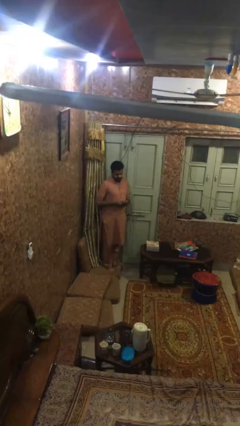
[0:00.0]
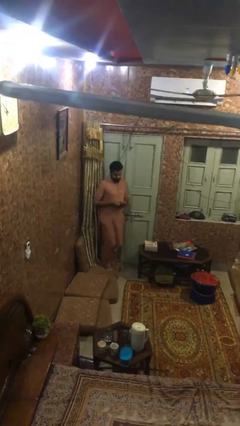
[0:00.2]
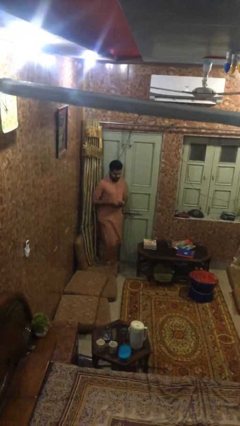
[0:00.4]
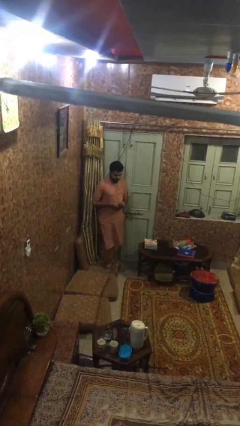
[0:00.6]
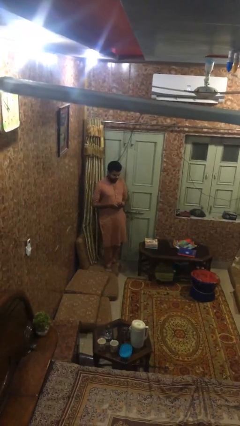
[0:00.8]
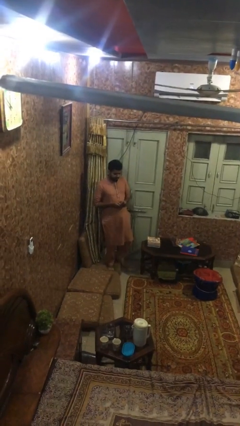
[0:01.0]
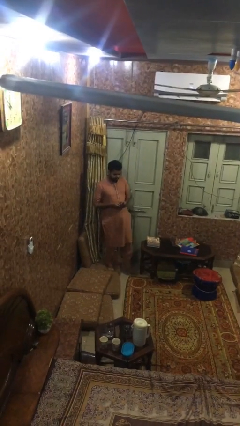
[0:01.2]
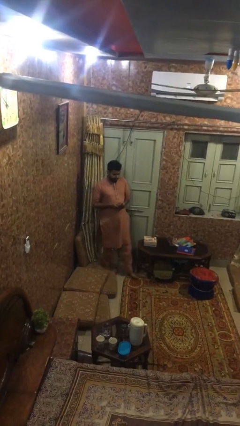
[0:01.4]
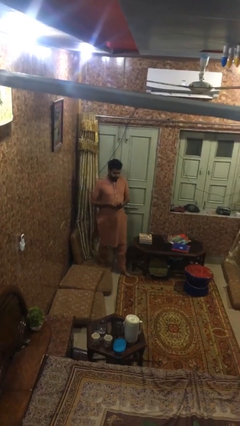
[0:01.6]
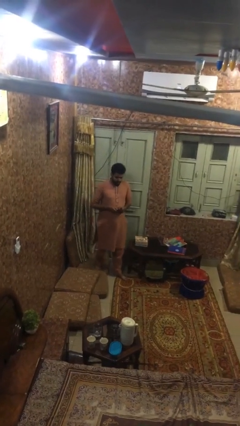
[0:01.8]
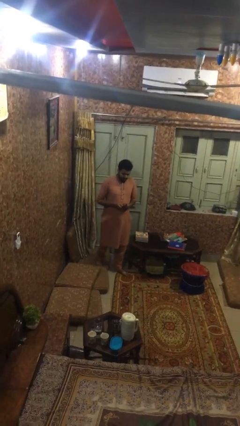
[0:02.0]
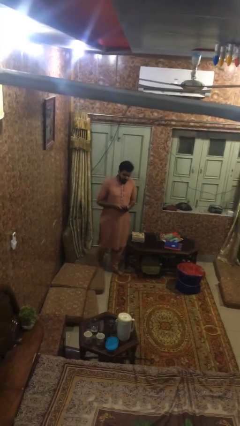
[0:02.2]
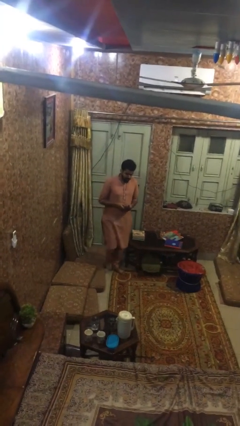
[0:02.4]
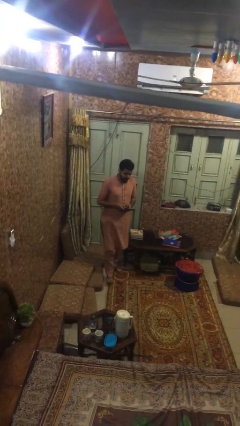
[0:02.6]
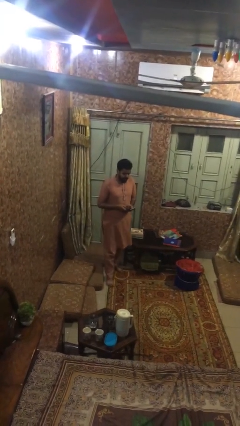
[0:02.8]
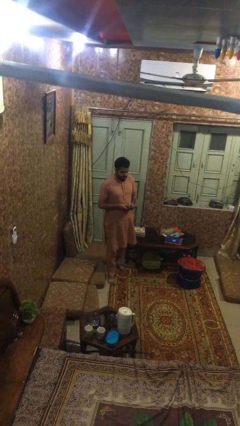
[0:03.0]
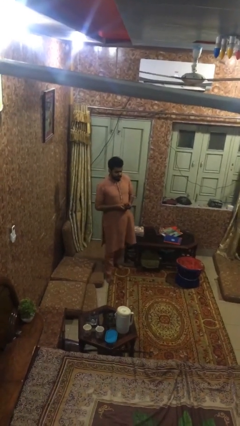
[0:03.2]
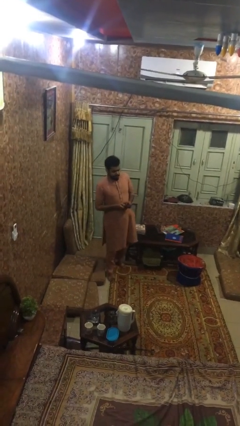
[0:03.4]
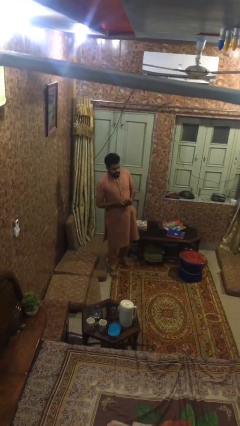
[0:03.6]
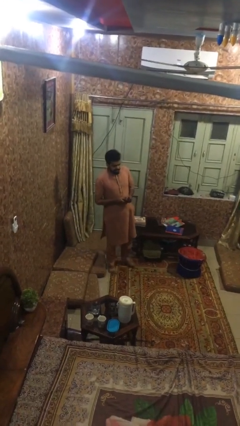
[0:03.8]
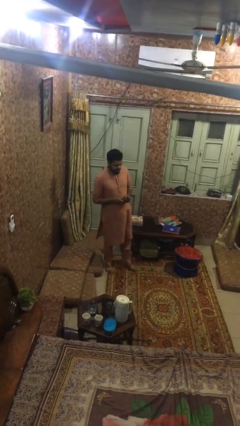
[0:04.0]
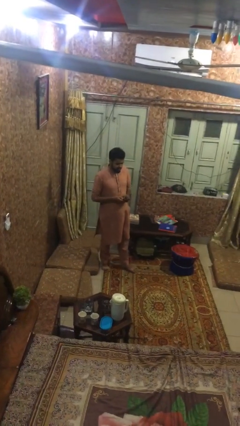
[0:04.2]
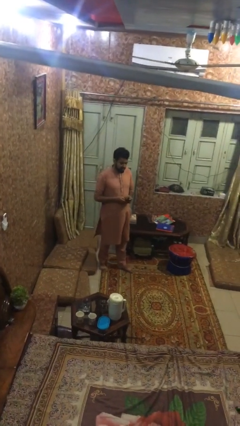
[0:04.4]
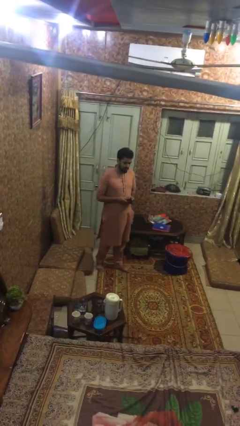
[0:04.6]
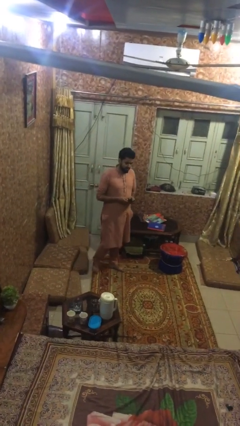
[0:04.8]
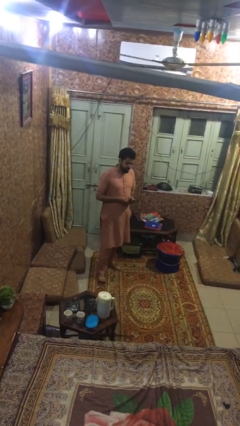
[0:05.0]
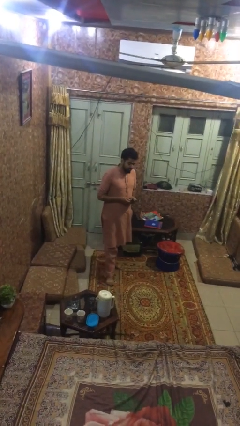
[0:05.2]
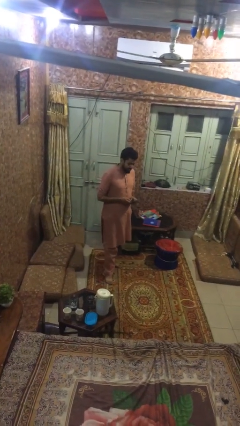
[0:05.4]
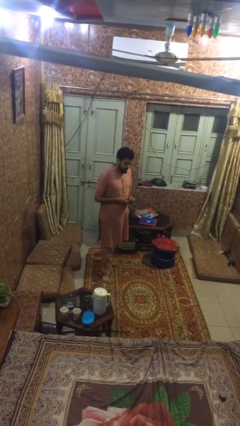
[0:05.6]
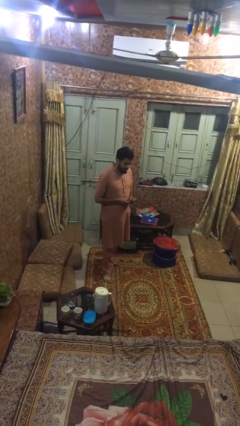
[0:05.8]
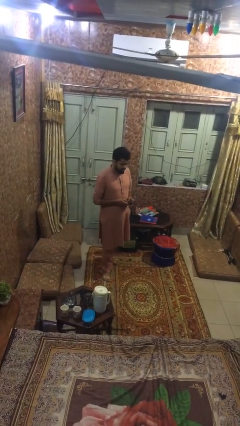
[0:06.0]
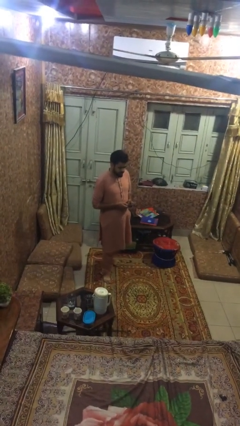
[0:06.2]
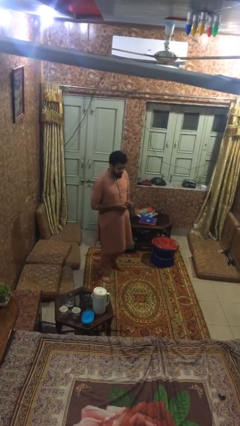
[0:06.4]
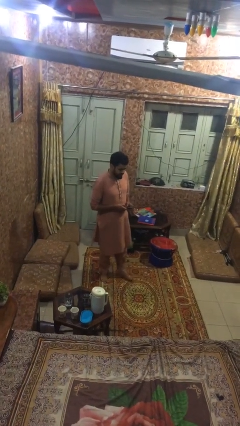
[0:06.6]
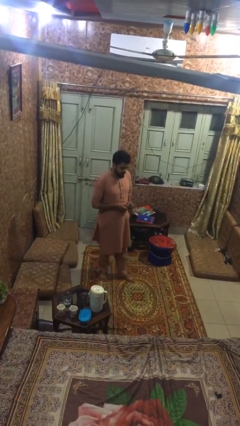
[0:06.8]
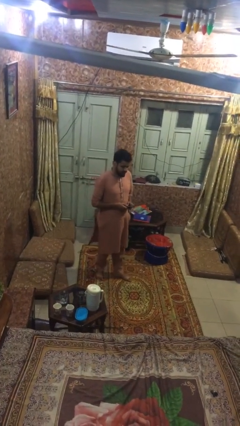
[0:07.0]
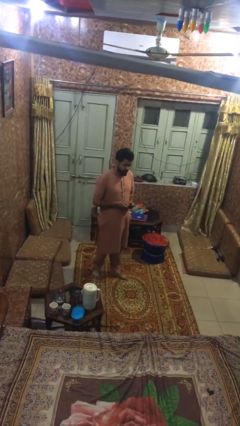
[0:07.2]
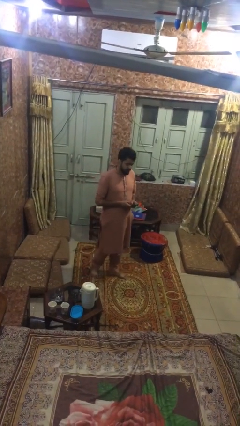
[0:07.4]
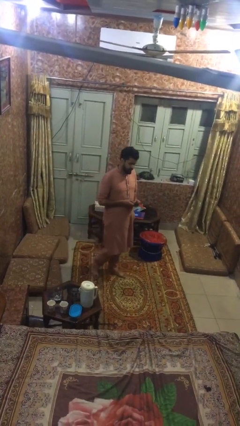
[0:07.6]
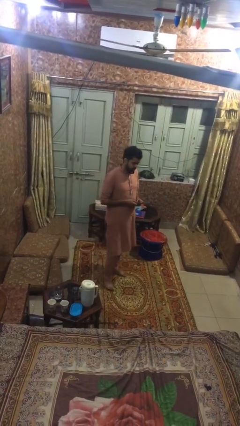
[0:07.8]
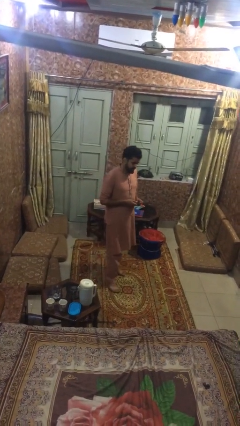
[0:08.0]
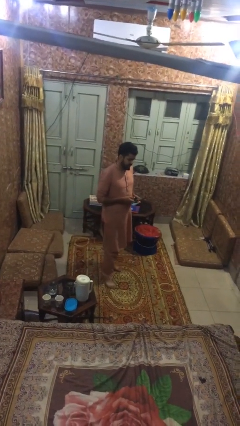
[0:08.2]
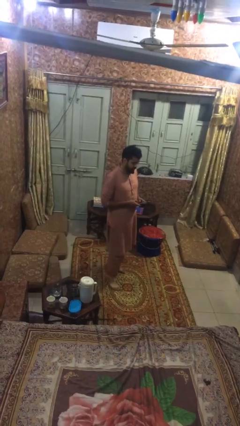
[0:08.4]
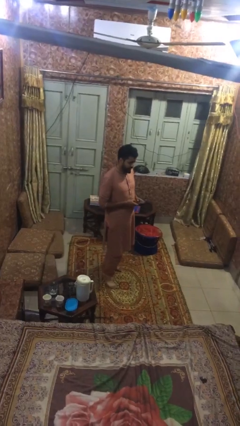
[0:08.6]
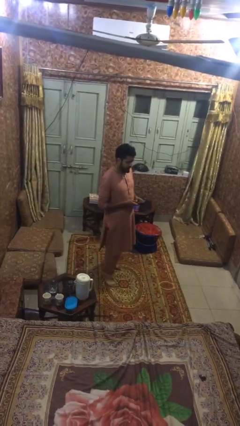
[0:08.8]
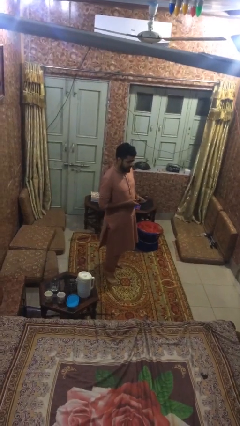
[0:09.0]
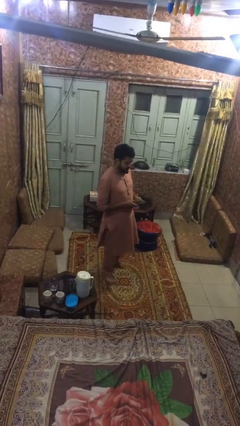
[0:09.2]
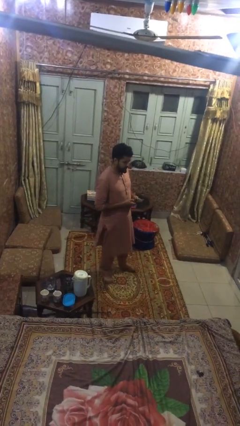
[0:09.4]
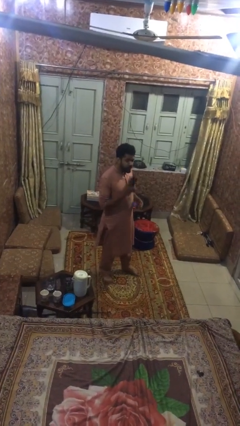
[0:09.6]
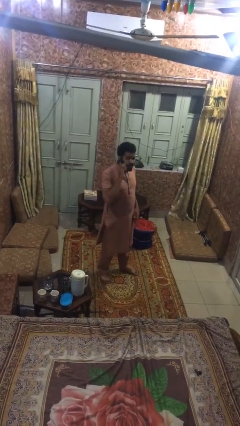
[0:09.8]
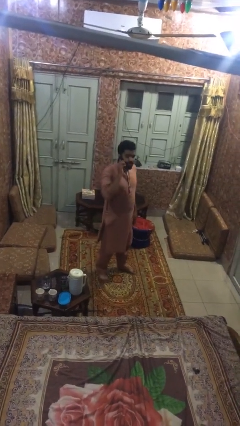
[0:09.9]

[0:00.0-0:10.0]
person texts on phone

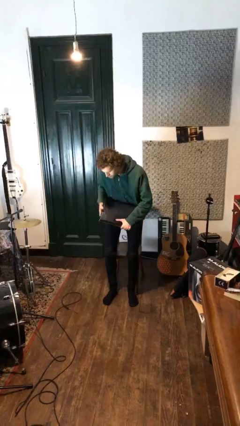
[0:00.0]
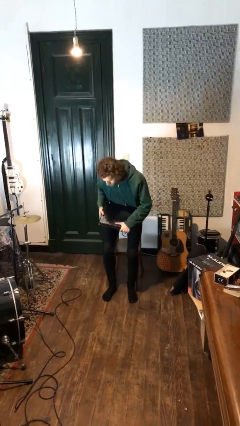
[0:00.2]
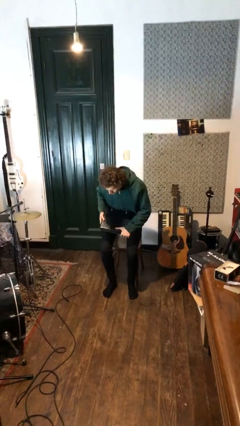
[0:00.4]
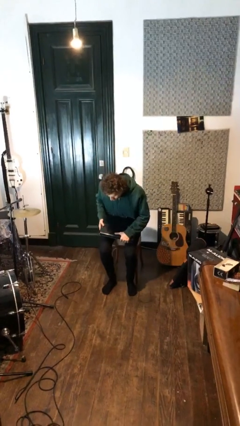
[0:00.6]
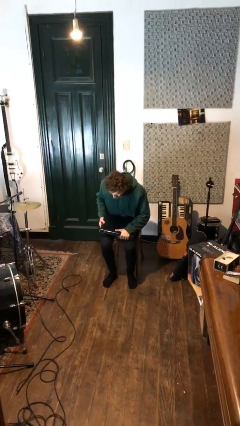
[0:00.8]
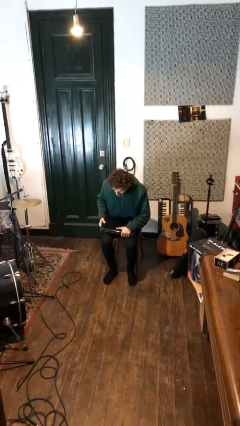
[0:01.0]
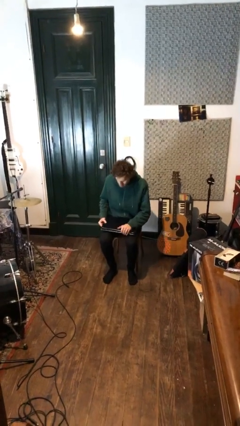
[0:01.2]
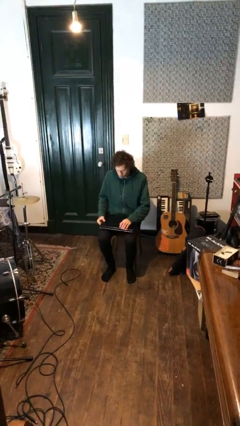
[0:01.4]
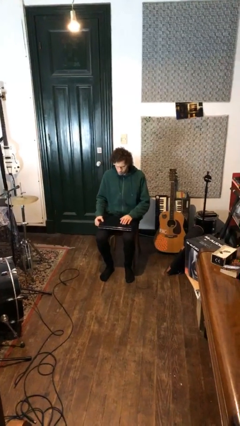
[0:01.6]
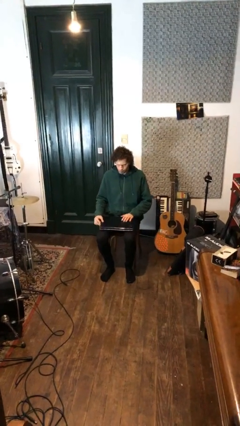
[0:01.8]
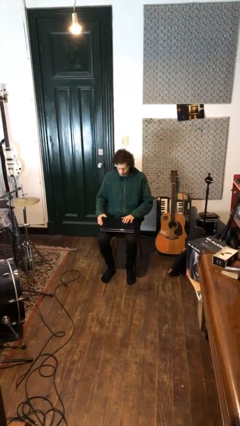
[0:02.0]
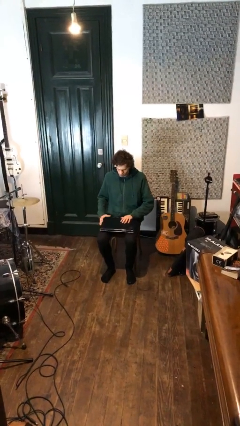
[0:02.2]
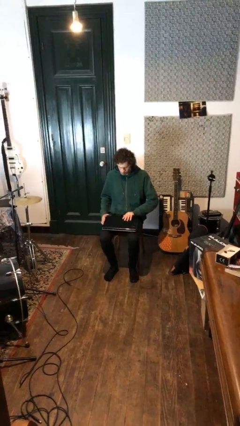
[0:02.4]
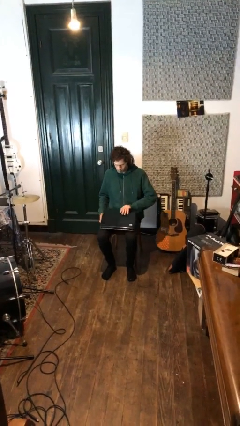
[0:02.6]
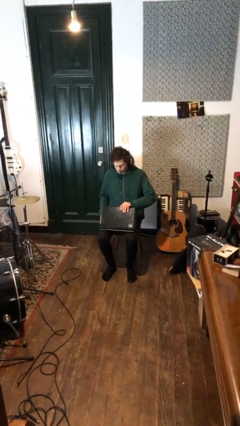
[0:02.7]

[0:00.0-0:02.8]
person sits down

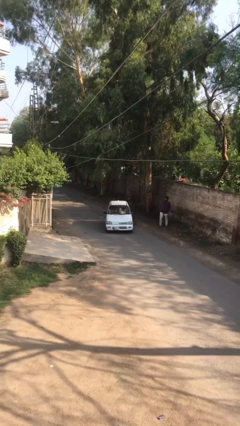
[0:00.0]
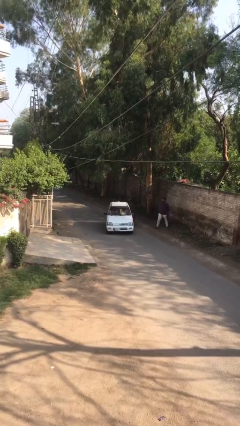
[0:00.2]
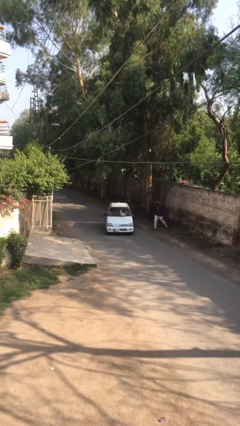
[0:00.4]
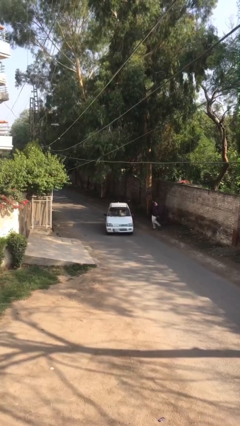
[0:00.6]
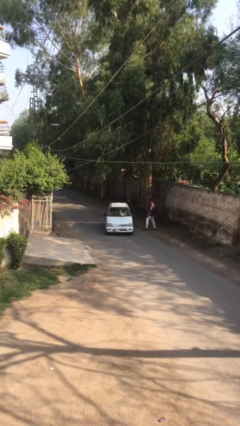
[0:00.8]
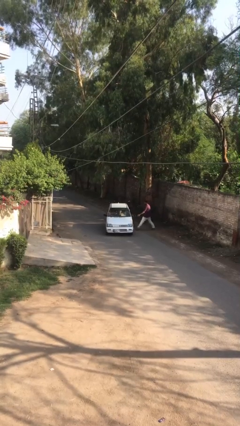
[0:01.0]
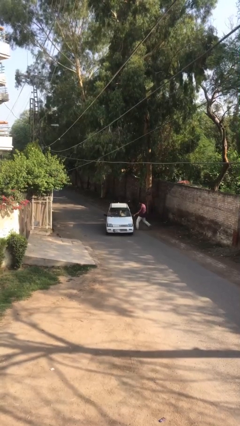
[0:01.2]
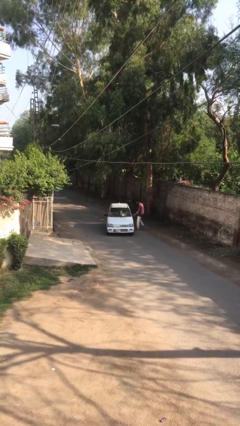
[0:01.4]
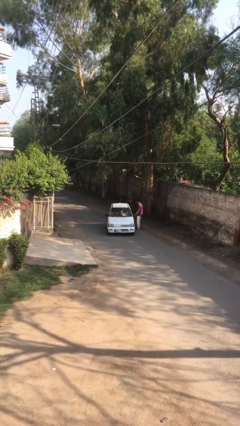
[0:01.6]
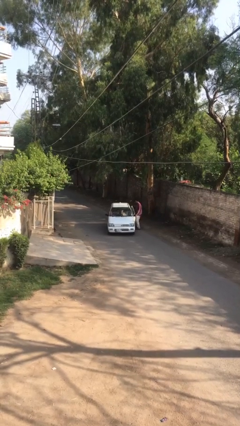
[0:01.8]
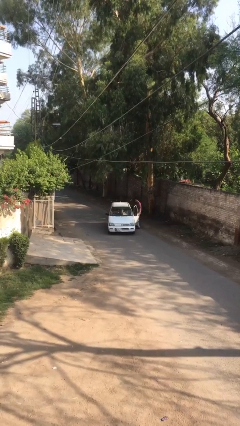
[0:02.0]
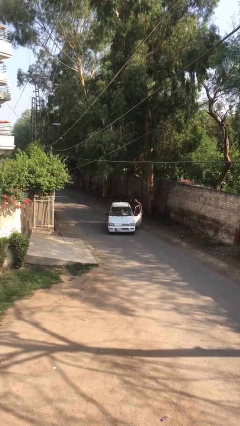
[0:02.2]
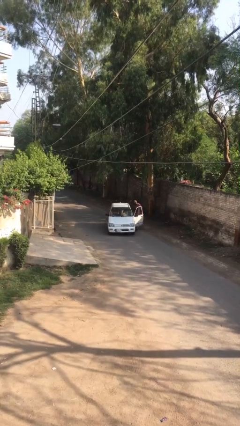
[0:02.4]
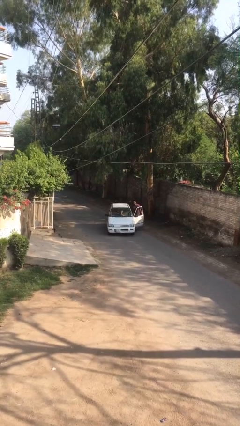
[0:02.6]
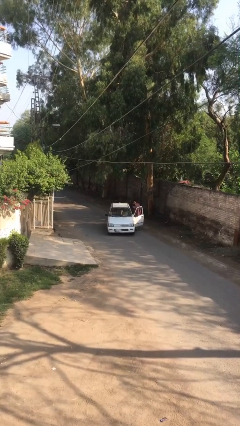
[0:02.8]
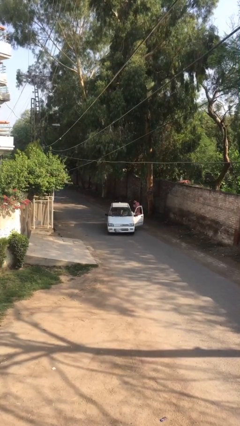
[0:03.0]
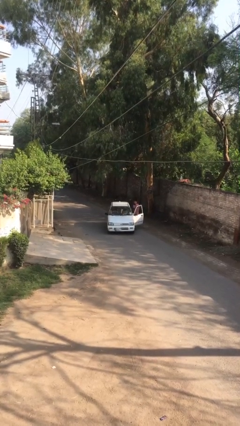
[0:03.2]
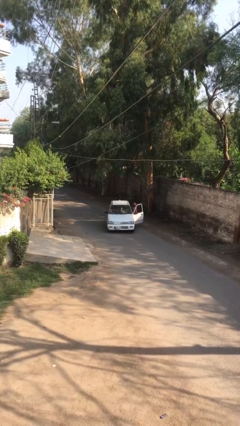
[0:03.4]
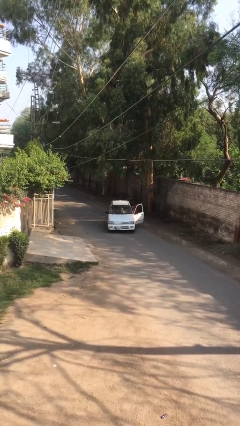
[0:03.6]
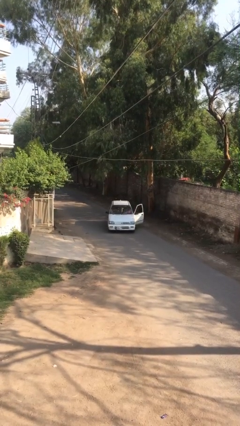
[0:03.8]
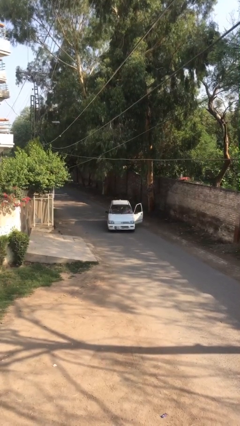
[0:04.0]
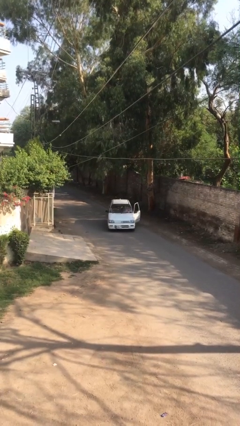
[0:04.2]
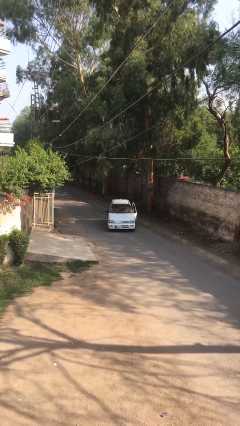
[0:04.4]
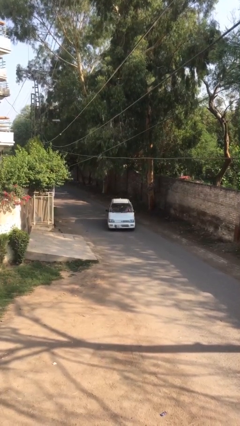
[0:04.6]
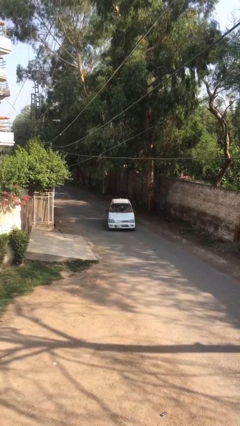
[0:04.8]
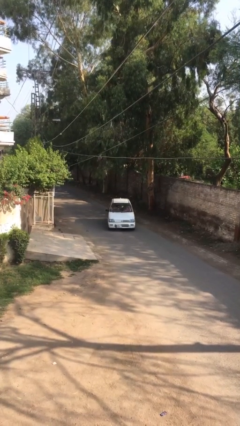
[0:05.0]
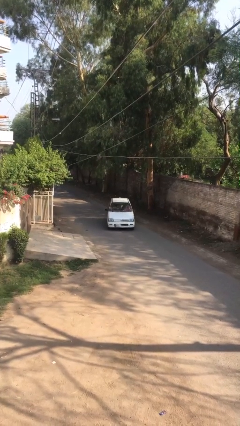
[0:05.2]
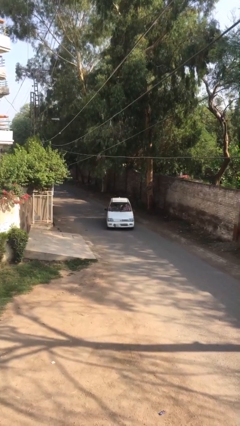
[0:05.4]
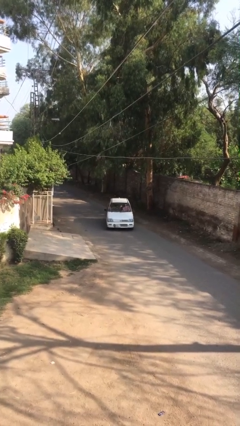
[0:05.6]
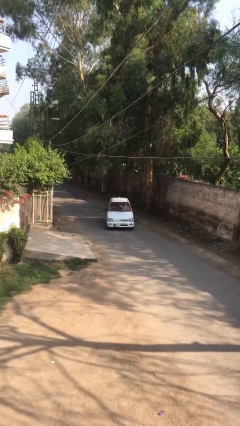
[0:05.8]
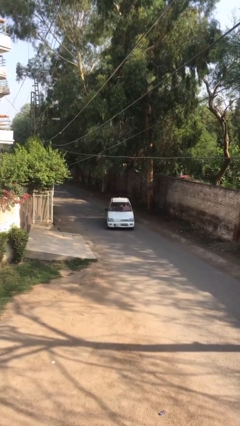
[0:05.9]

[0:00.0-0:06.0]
car picks up person
